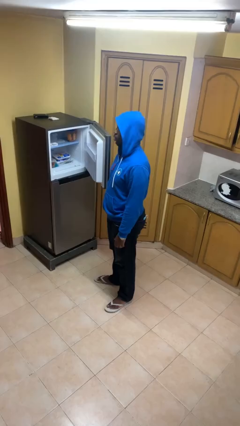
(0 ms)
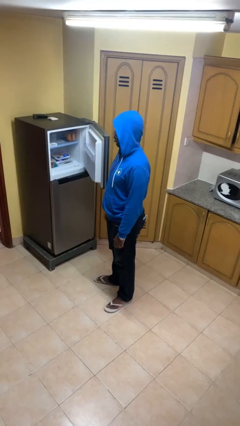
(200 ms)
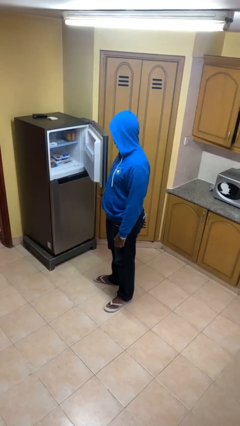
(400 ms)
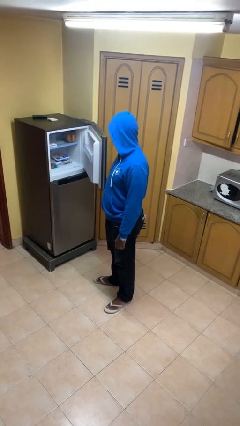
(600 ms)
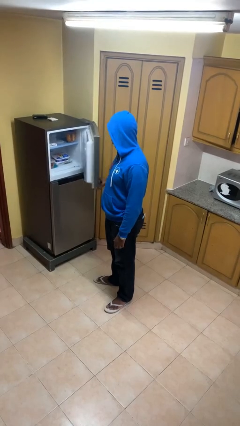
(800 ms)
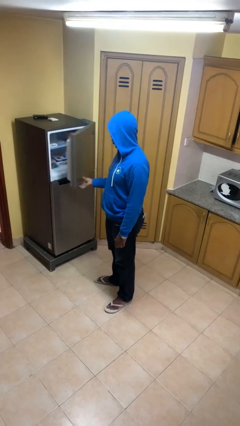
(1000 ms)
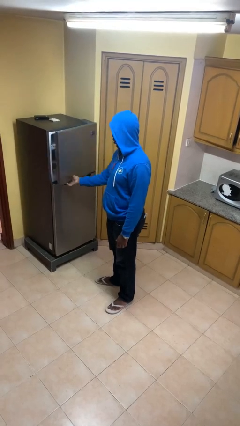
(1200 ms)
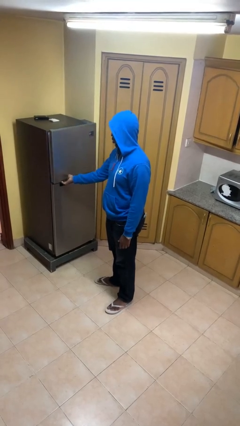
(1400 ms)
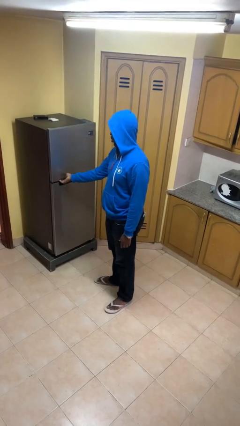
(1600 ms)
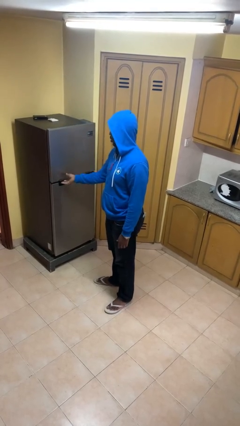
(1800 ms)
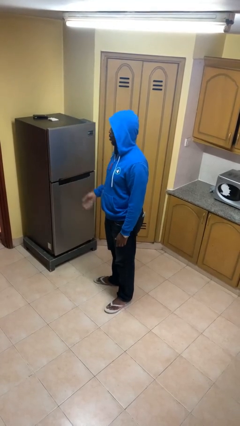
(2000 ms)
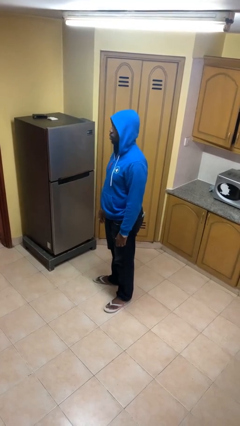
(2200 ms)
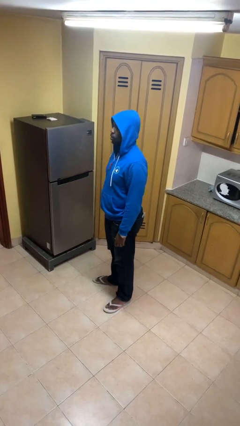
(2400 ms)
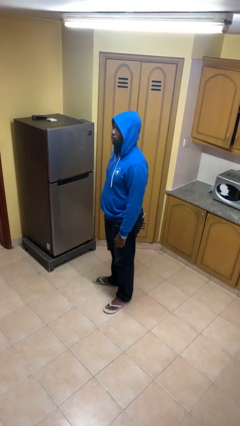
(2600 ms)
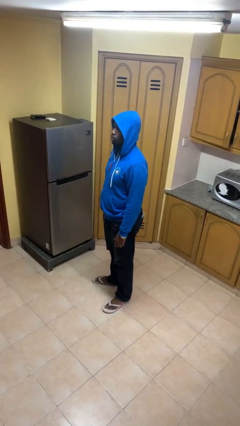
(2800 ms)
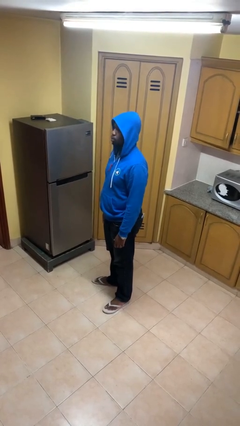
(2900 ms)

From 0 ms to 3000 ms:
person closes refrigerator

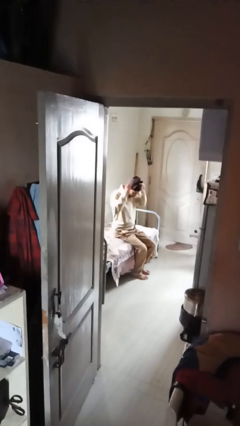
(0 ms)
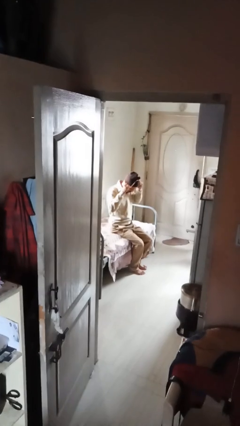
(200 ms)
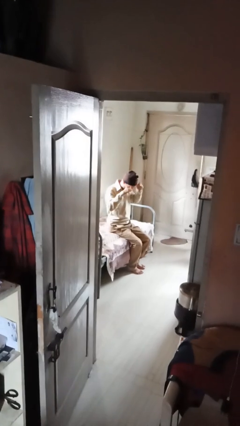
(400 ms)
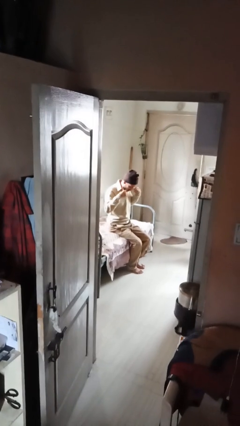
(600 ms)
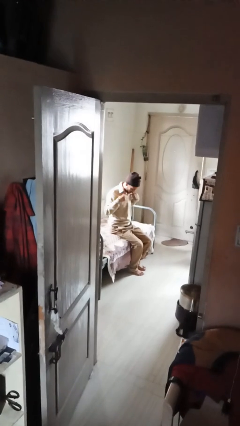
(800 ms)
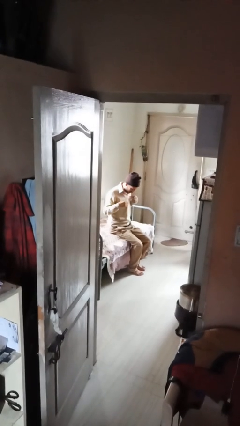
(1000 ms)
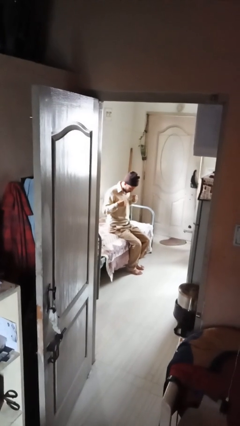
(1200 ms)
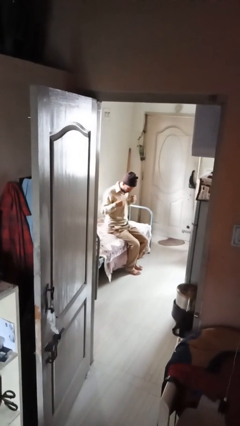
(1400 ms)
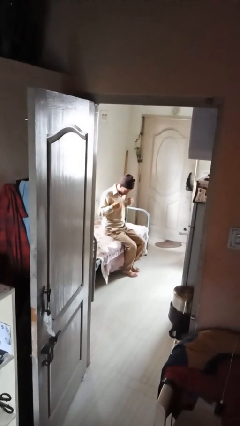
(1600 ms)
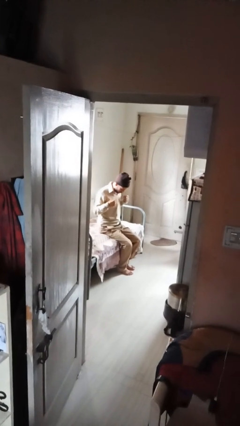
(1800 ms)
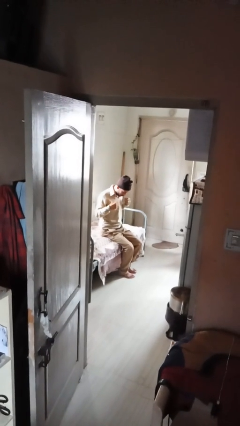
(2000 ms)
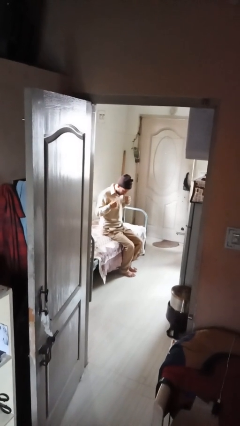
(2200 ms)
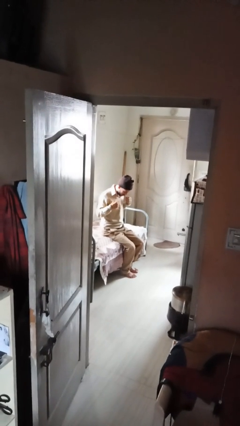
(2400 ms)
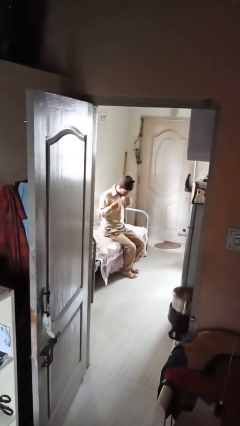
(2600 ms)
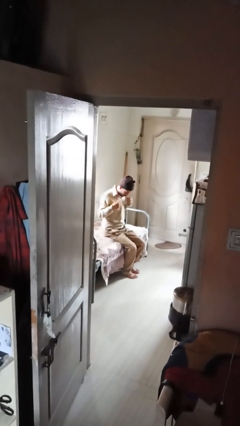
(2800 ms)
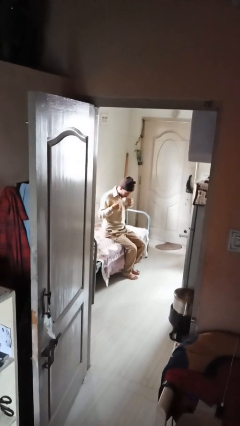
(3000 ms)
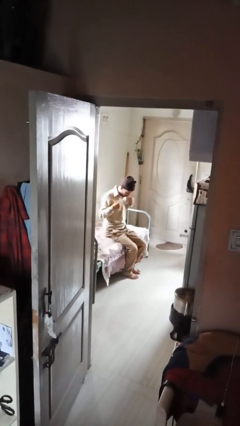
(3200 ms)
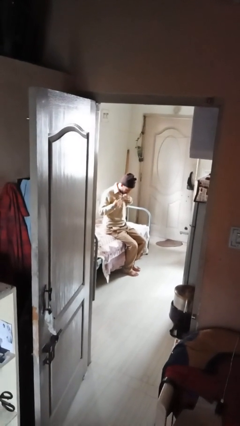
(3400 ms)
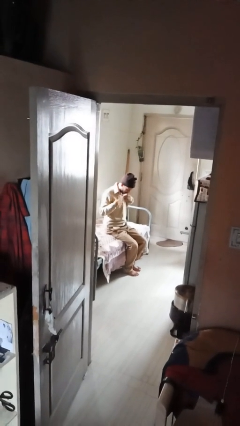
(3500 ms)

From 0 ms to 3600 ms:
person puts on necklace

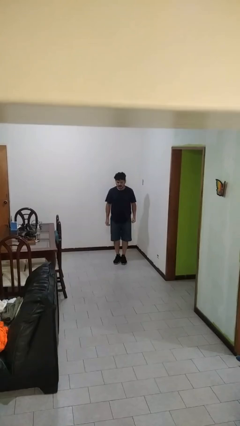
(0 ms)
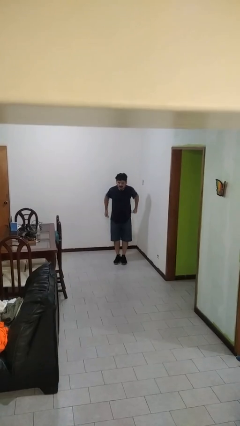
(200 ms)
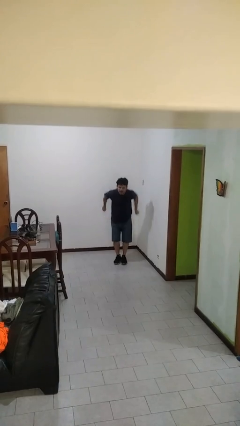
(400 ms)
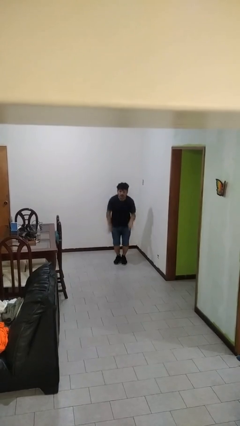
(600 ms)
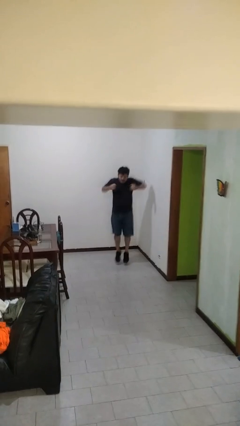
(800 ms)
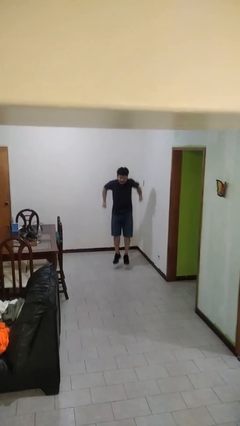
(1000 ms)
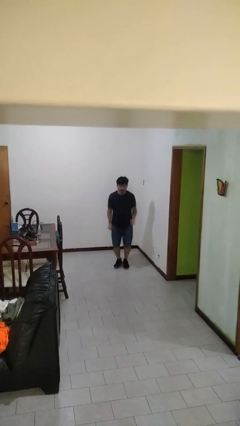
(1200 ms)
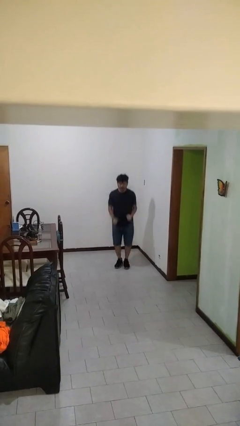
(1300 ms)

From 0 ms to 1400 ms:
person jumps

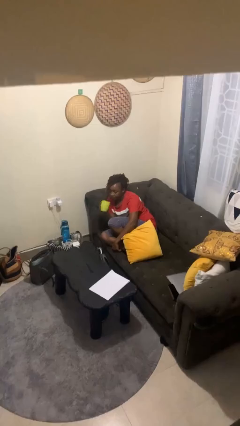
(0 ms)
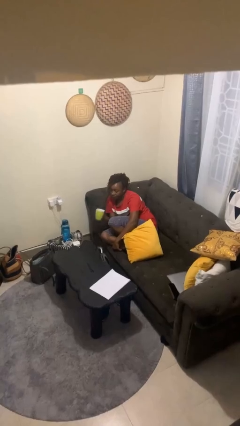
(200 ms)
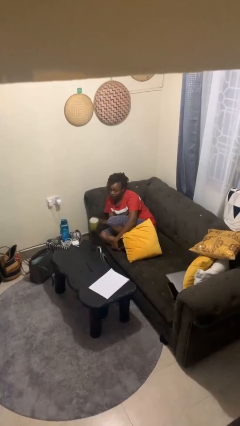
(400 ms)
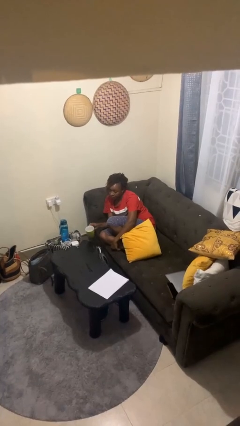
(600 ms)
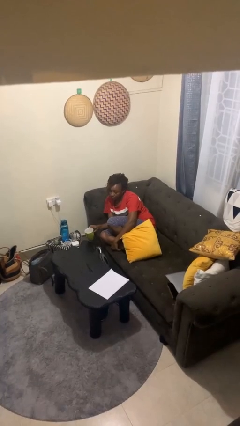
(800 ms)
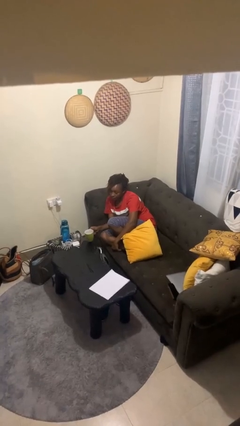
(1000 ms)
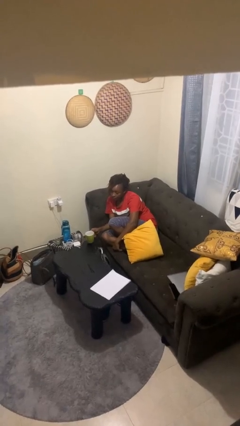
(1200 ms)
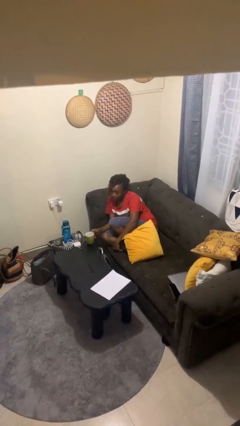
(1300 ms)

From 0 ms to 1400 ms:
person puts down object on table

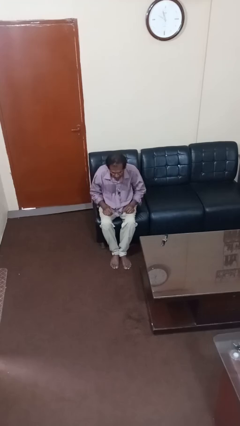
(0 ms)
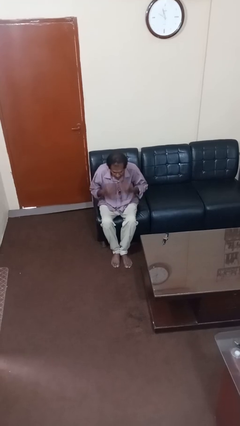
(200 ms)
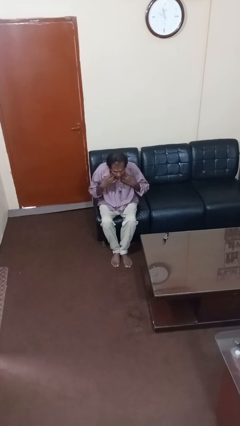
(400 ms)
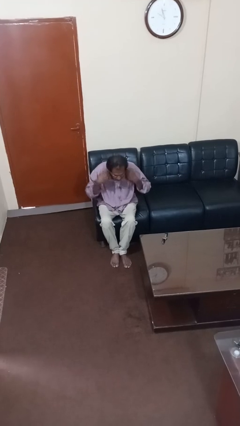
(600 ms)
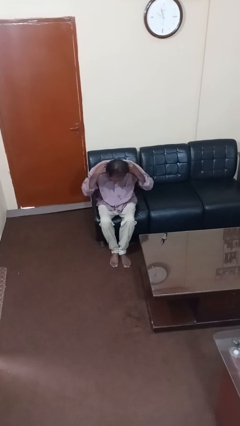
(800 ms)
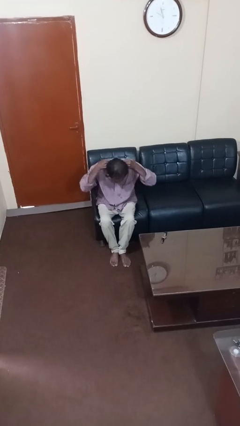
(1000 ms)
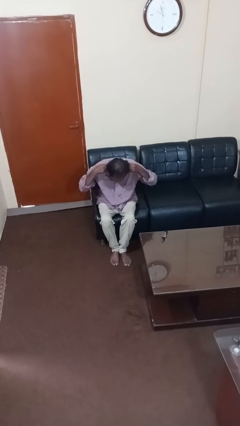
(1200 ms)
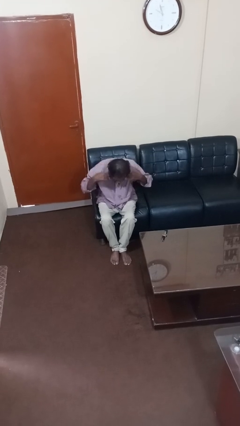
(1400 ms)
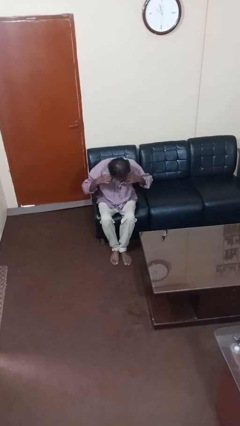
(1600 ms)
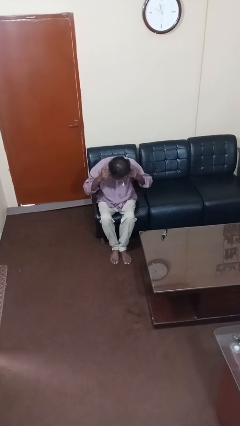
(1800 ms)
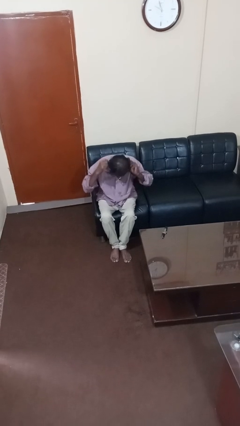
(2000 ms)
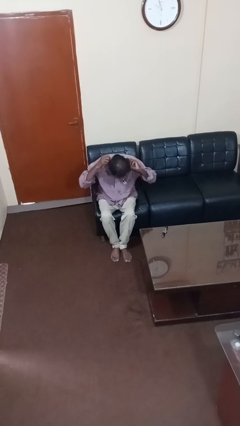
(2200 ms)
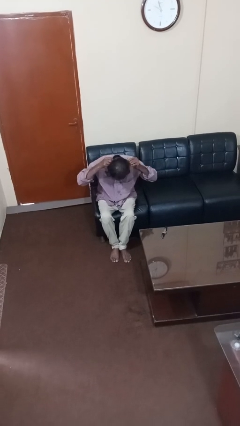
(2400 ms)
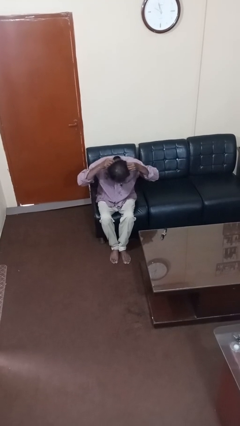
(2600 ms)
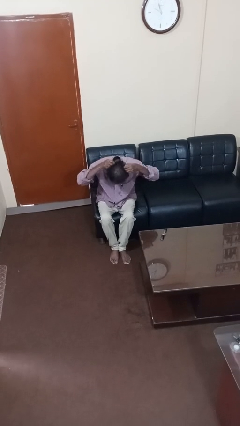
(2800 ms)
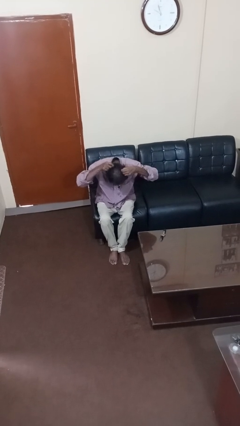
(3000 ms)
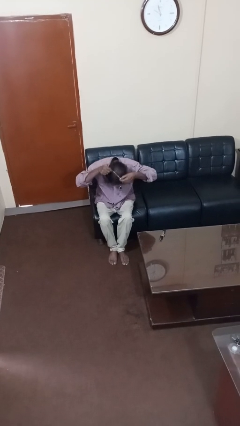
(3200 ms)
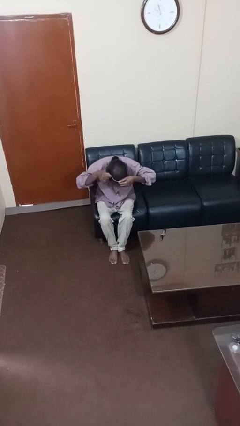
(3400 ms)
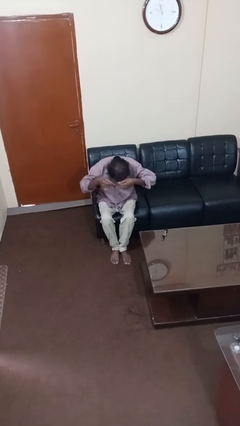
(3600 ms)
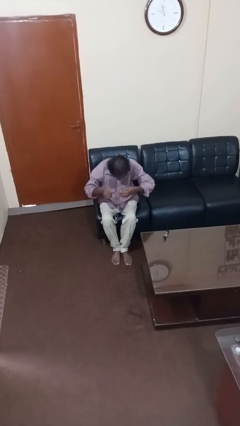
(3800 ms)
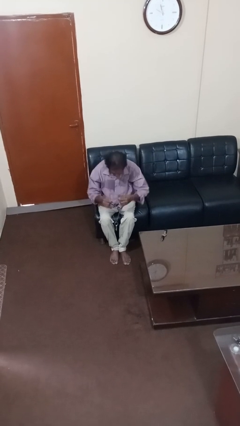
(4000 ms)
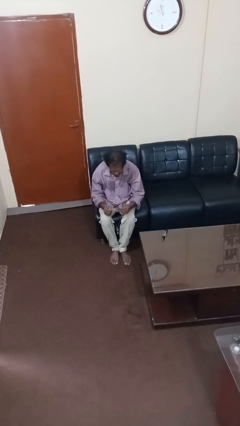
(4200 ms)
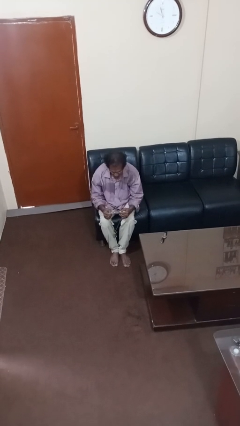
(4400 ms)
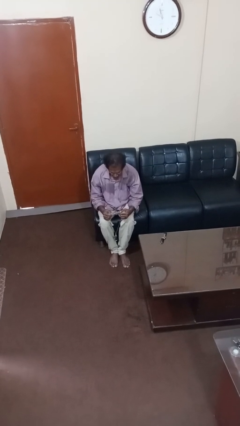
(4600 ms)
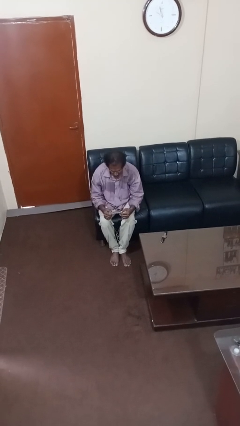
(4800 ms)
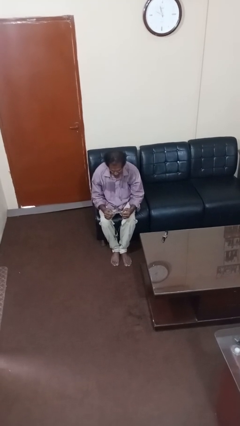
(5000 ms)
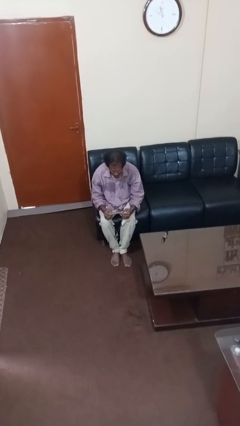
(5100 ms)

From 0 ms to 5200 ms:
person takes off necklace

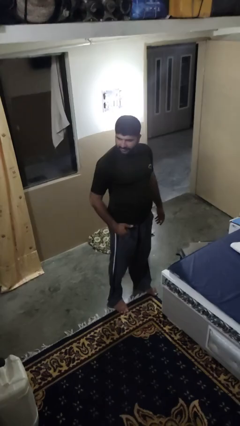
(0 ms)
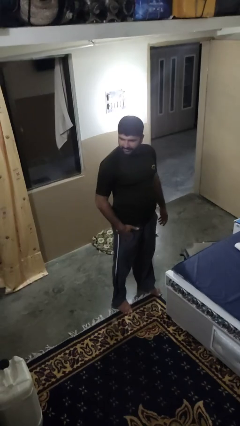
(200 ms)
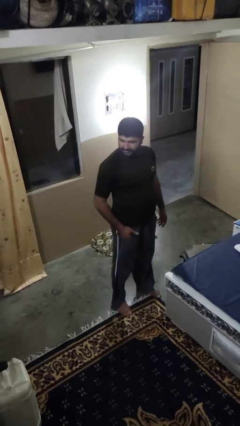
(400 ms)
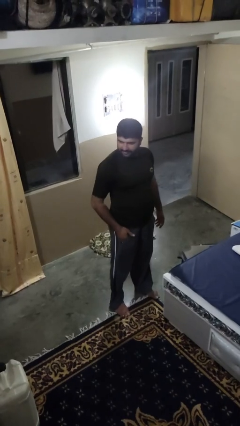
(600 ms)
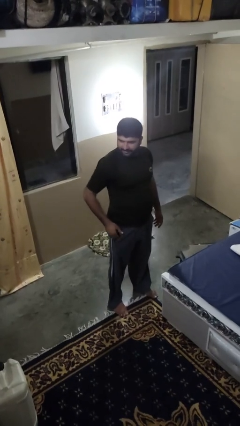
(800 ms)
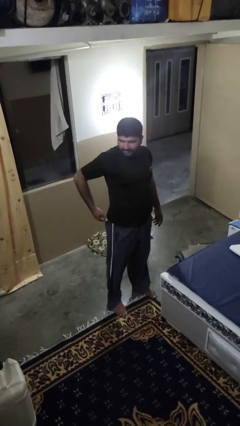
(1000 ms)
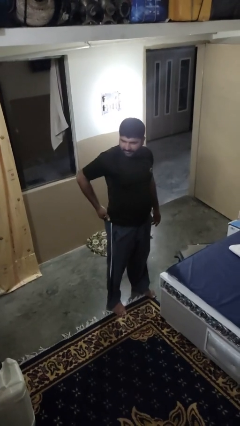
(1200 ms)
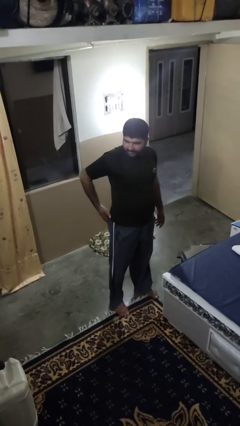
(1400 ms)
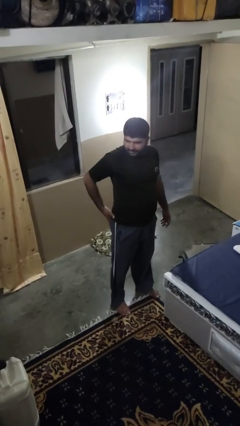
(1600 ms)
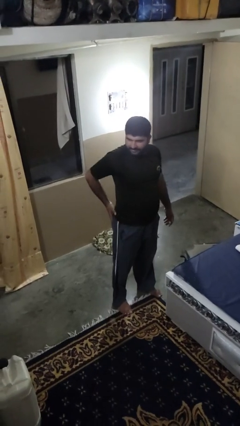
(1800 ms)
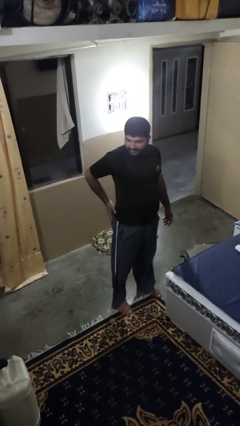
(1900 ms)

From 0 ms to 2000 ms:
person puts hands in back pockets

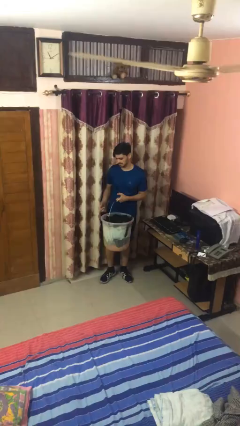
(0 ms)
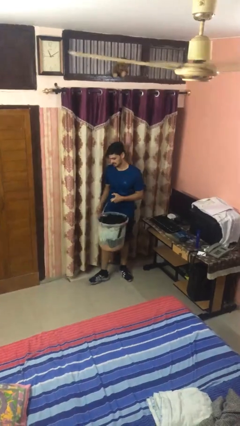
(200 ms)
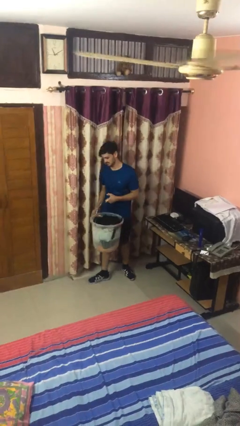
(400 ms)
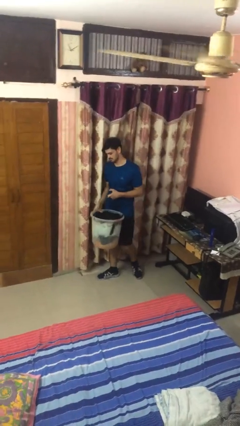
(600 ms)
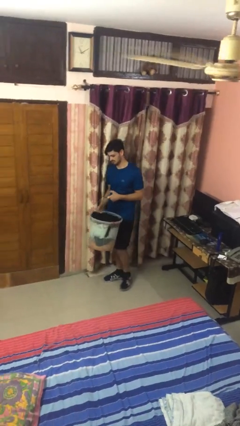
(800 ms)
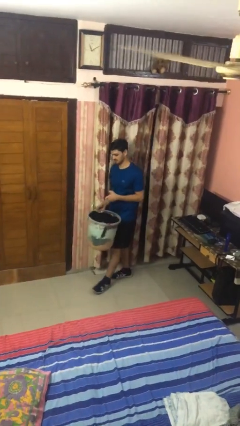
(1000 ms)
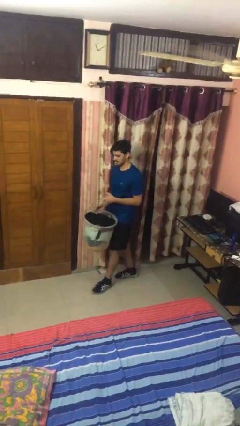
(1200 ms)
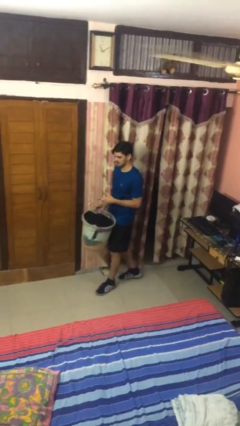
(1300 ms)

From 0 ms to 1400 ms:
person carries laundry basket
